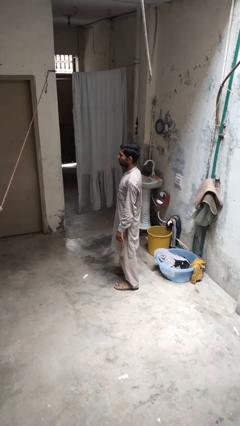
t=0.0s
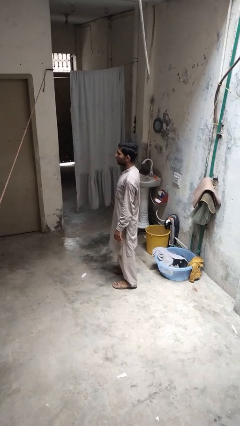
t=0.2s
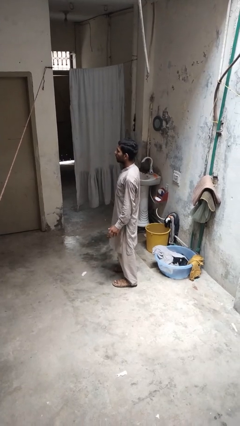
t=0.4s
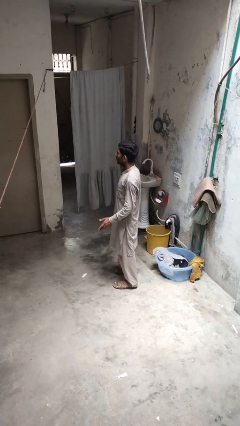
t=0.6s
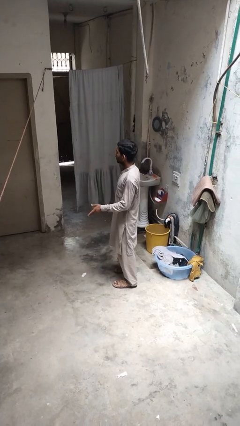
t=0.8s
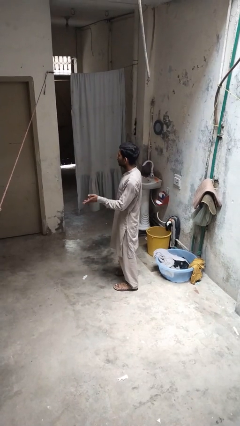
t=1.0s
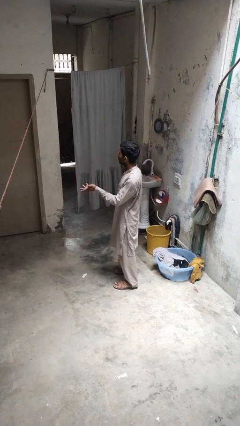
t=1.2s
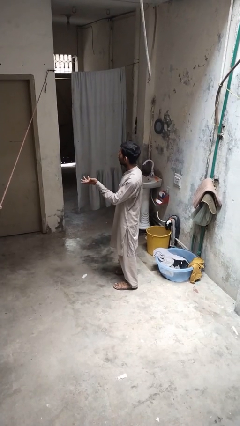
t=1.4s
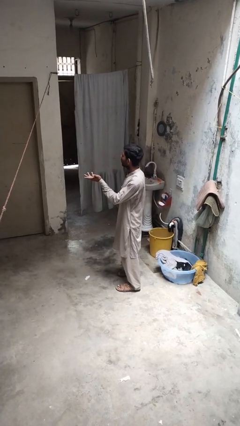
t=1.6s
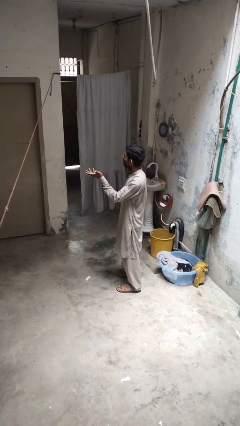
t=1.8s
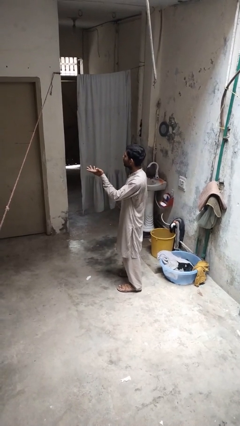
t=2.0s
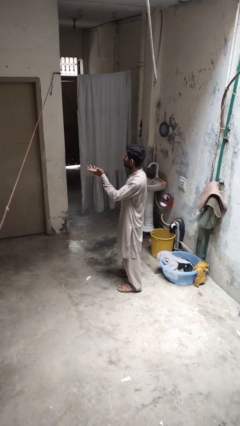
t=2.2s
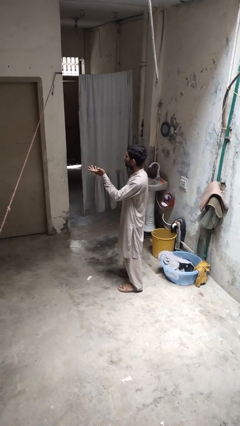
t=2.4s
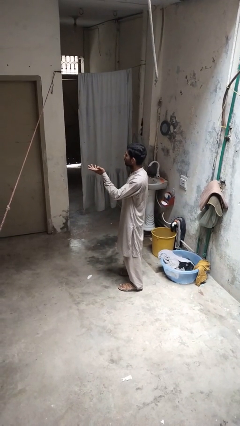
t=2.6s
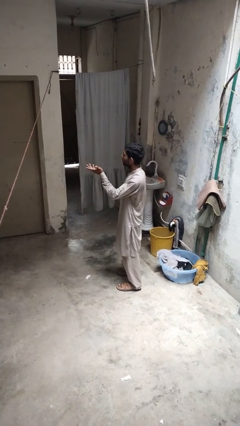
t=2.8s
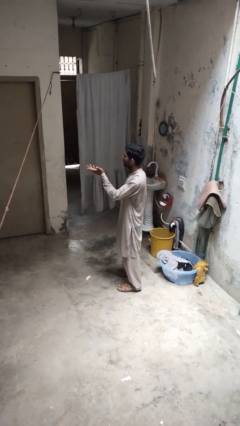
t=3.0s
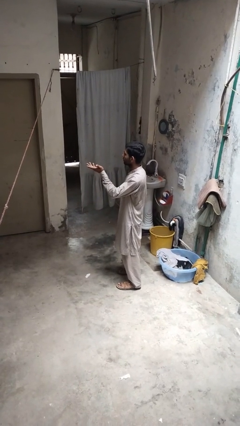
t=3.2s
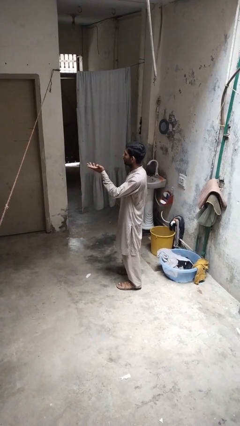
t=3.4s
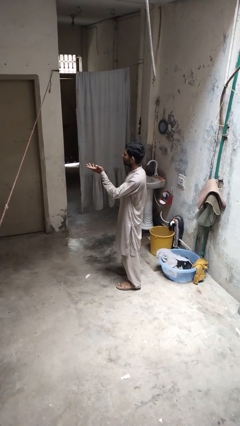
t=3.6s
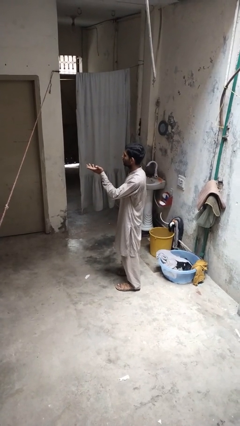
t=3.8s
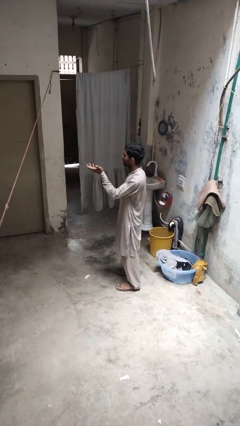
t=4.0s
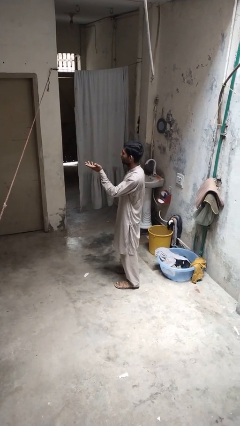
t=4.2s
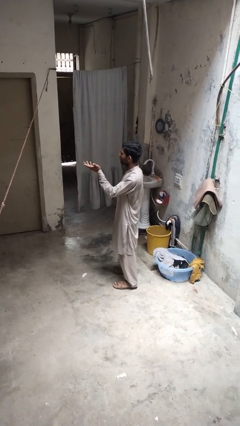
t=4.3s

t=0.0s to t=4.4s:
person gestures swipe up

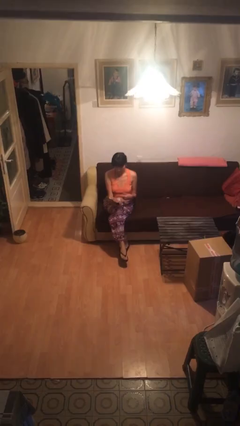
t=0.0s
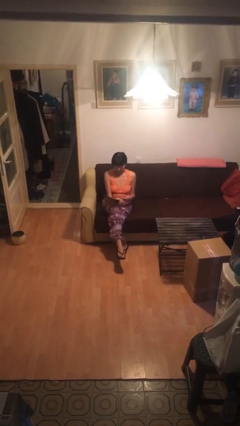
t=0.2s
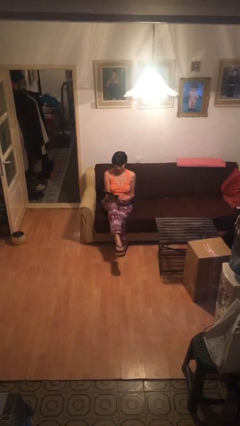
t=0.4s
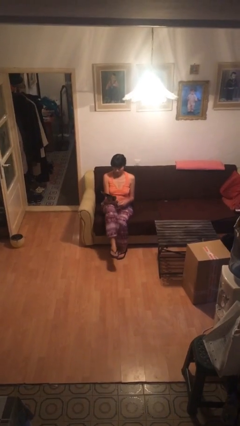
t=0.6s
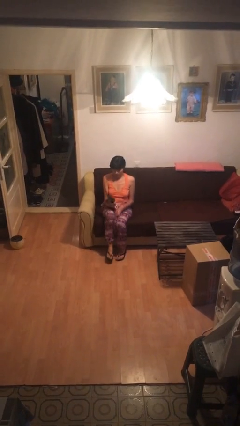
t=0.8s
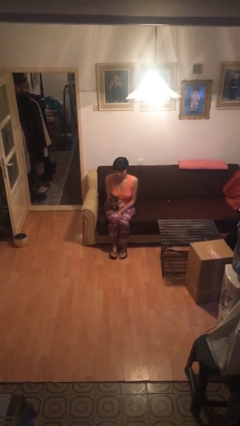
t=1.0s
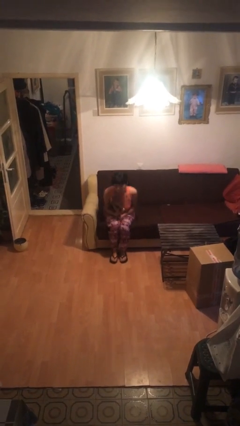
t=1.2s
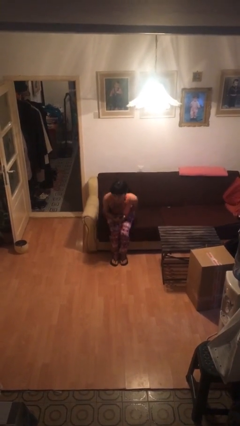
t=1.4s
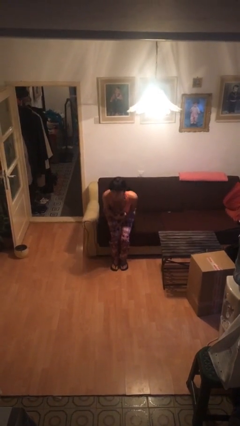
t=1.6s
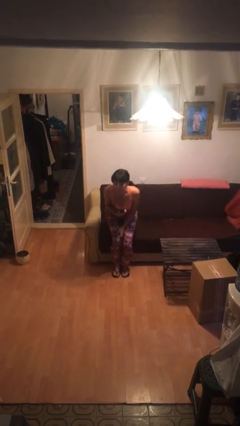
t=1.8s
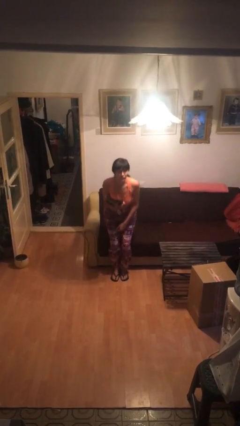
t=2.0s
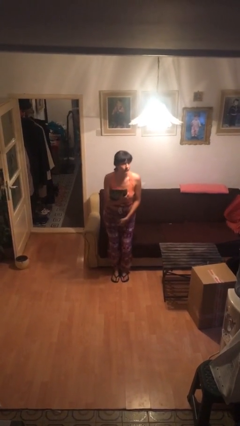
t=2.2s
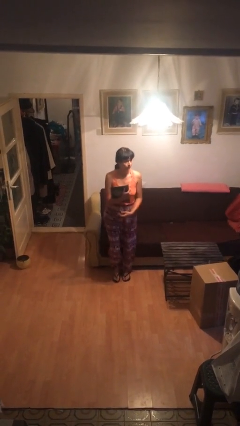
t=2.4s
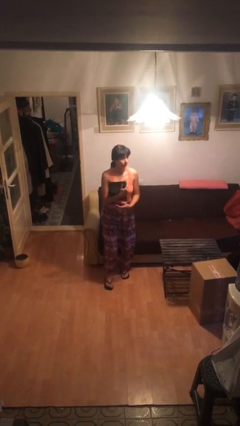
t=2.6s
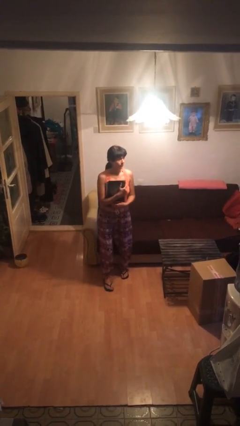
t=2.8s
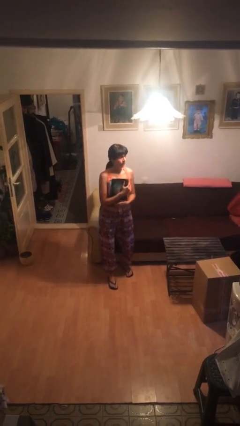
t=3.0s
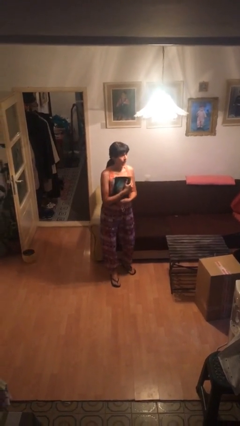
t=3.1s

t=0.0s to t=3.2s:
person stands up

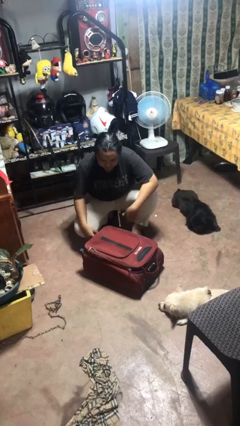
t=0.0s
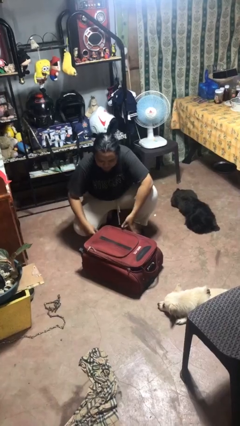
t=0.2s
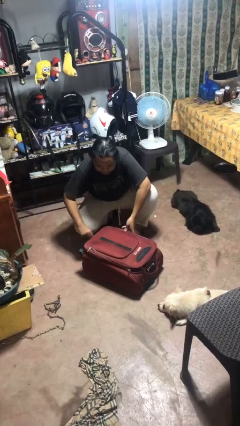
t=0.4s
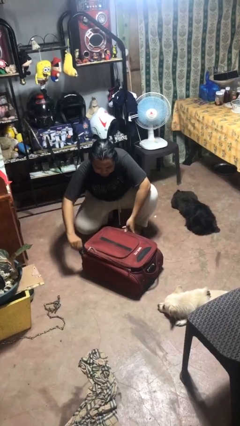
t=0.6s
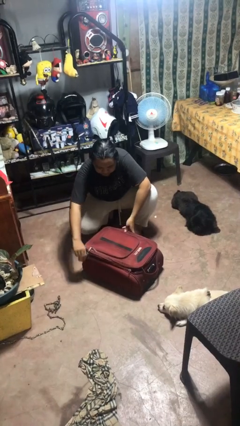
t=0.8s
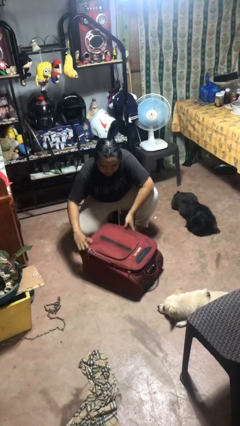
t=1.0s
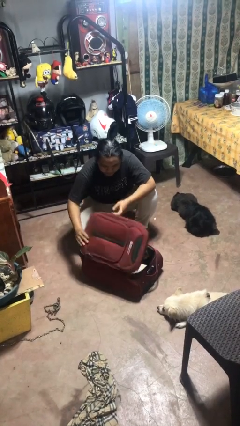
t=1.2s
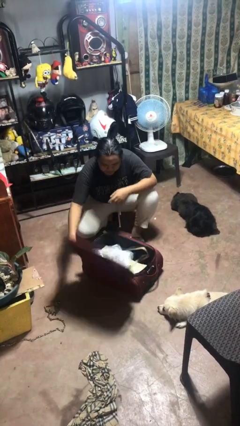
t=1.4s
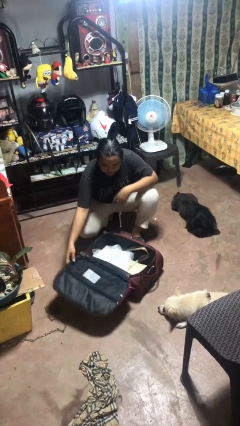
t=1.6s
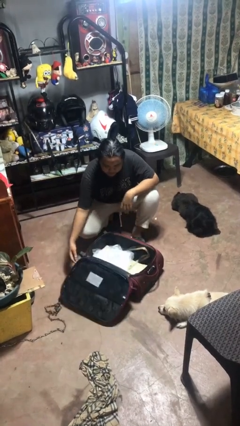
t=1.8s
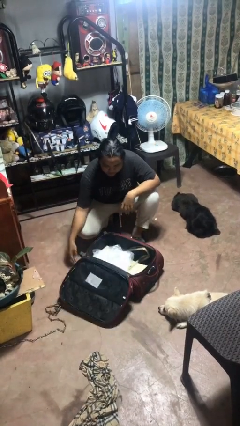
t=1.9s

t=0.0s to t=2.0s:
person opens suitcase

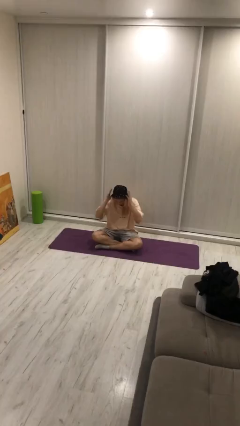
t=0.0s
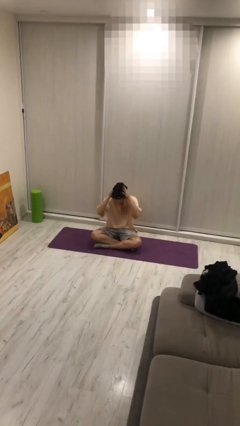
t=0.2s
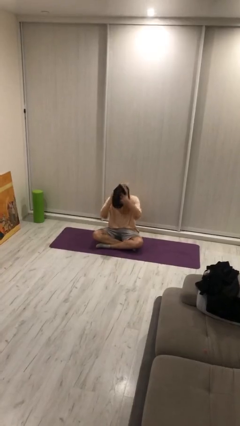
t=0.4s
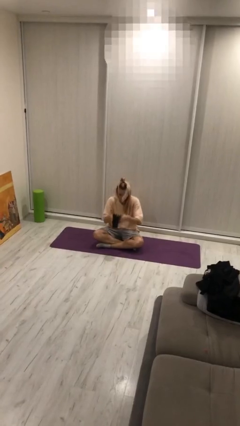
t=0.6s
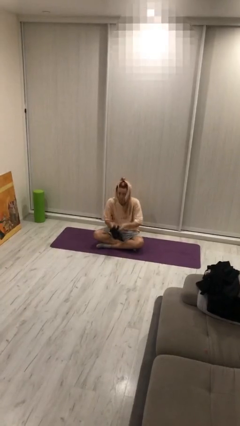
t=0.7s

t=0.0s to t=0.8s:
person takes off hat

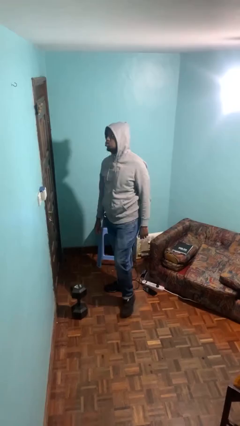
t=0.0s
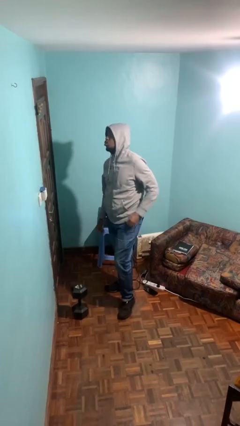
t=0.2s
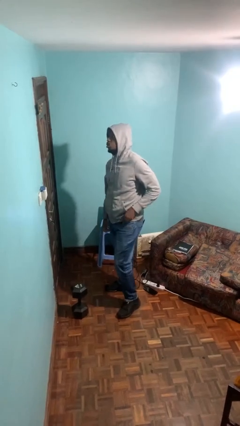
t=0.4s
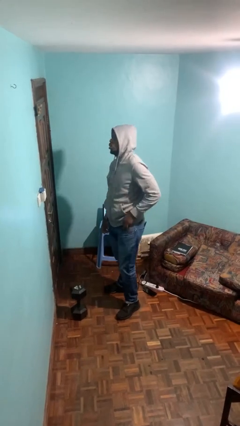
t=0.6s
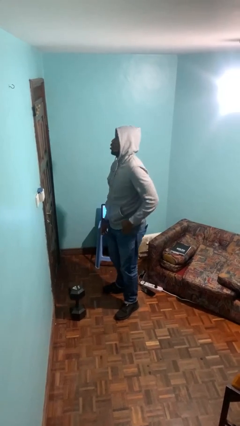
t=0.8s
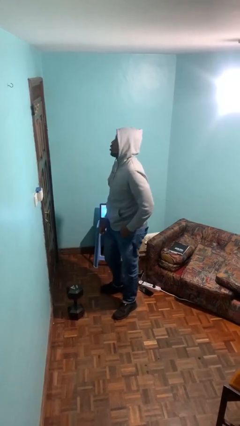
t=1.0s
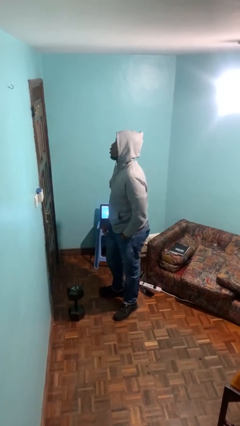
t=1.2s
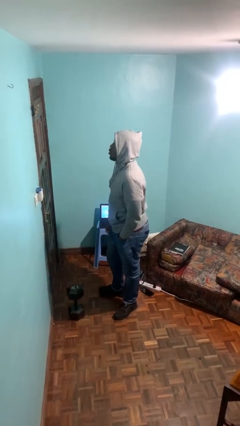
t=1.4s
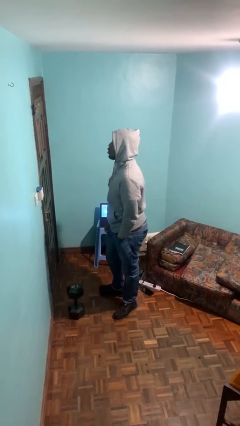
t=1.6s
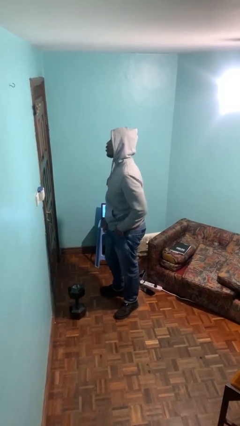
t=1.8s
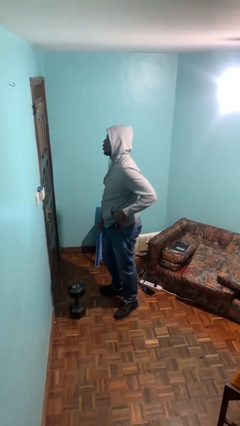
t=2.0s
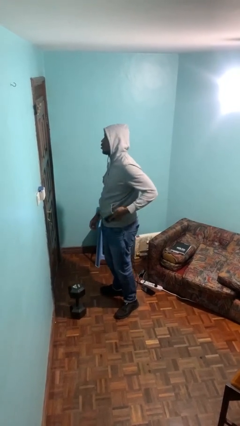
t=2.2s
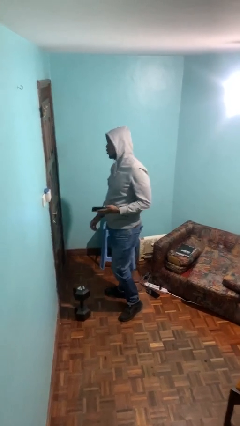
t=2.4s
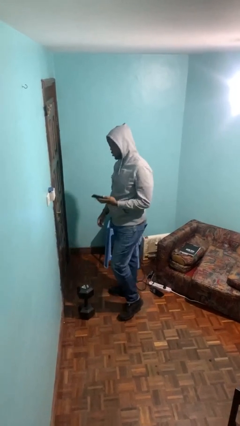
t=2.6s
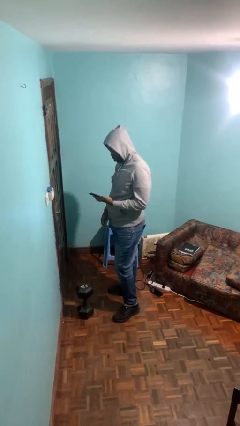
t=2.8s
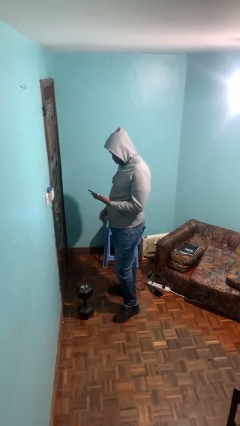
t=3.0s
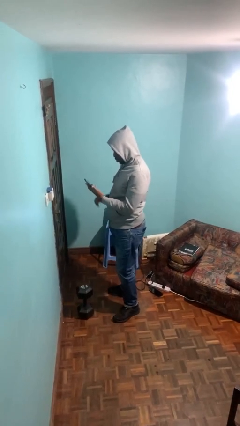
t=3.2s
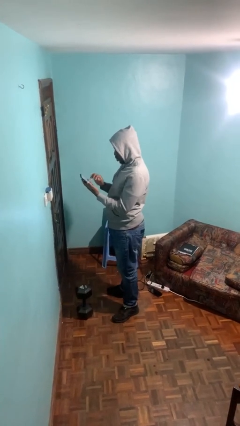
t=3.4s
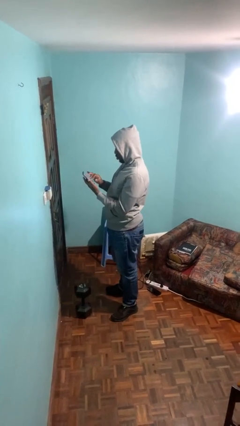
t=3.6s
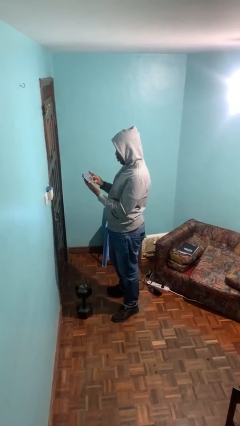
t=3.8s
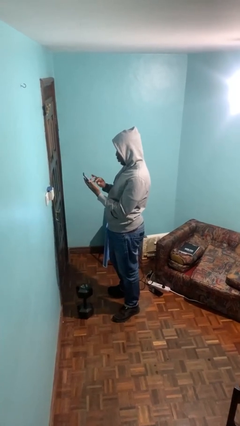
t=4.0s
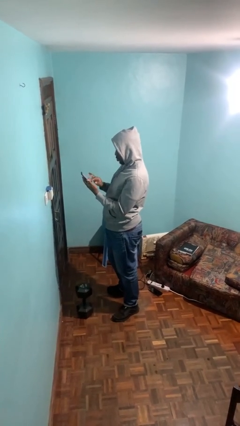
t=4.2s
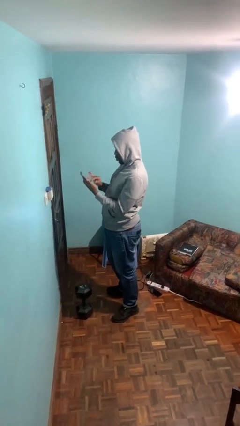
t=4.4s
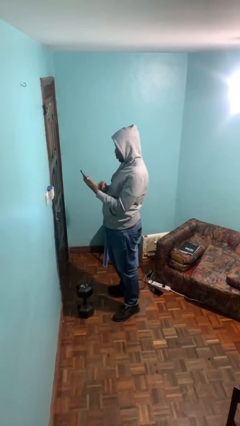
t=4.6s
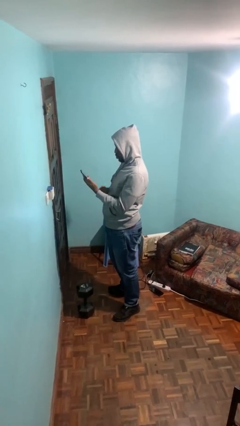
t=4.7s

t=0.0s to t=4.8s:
person takes phone from pocket

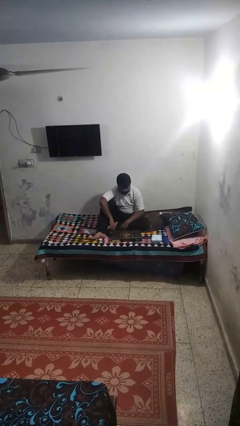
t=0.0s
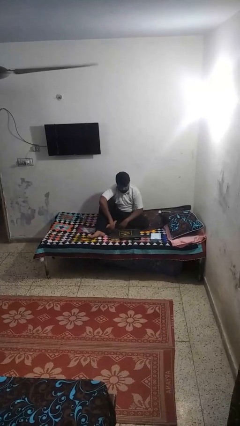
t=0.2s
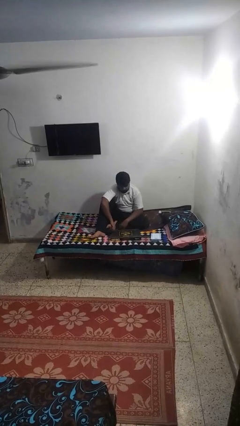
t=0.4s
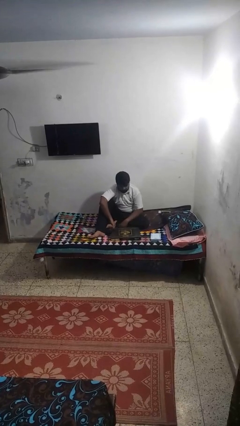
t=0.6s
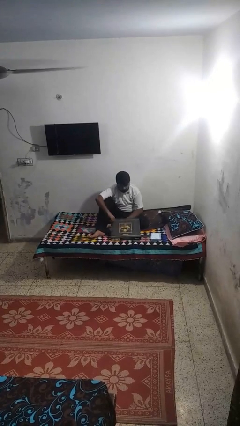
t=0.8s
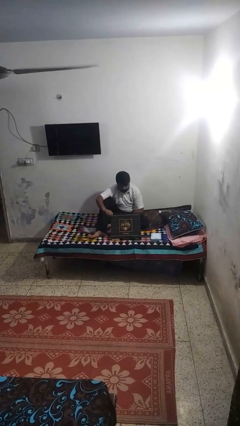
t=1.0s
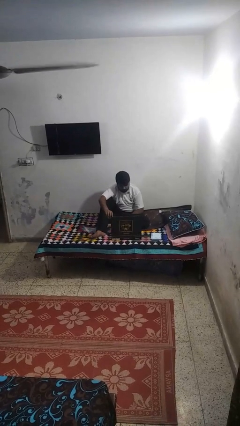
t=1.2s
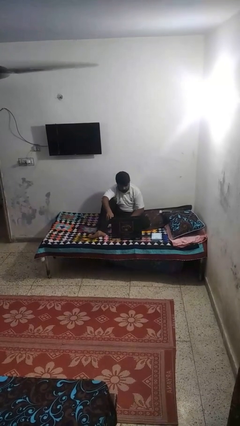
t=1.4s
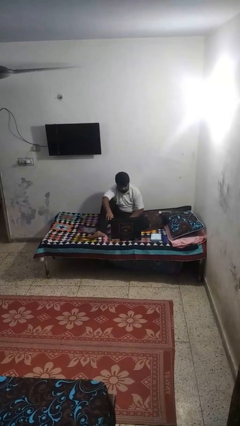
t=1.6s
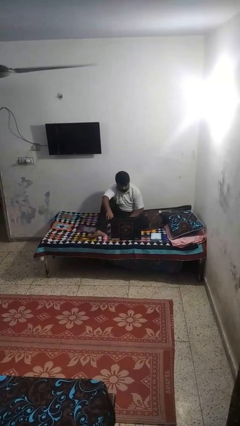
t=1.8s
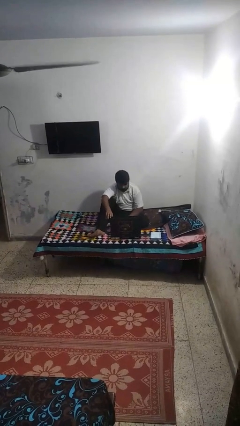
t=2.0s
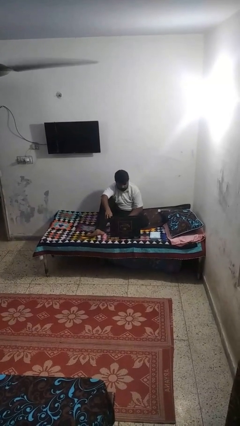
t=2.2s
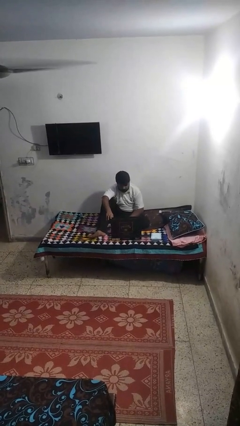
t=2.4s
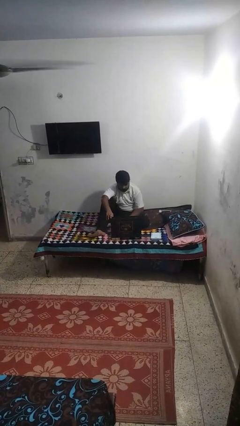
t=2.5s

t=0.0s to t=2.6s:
person opens laptop
